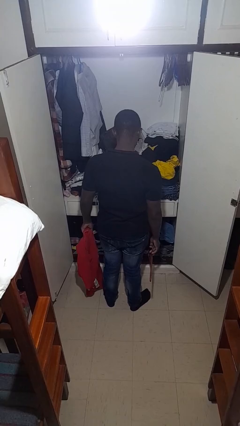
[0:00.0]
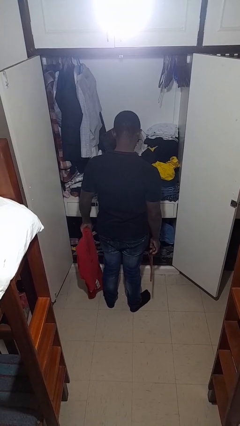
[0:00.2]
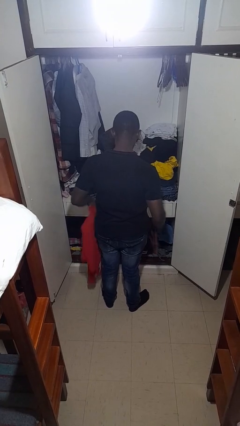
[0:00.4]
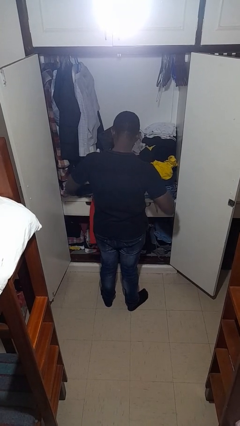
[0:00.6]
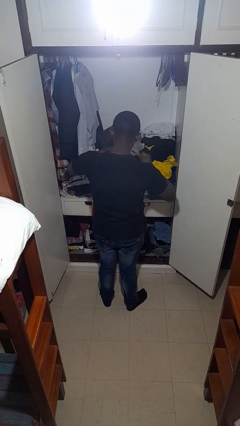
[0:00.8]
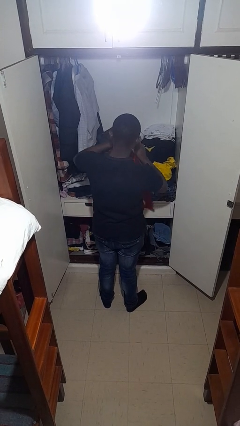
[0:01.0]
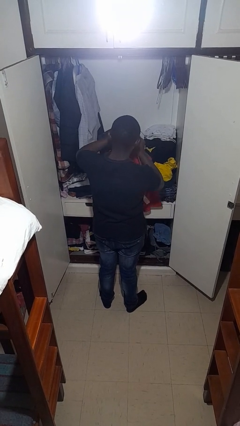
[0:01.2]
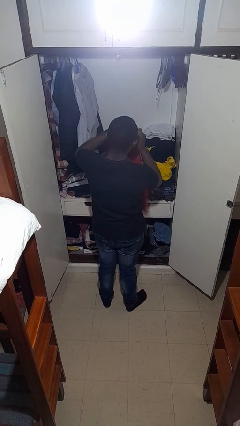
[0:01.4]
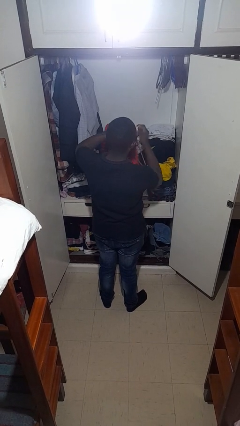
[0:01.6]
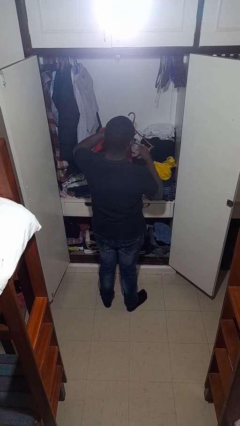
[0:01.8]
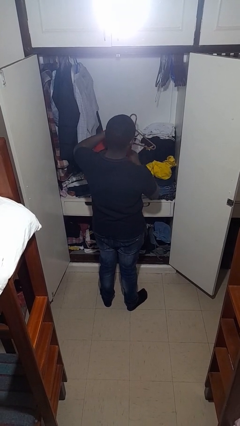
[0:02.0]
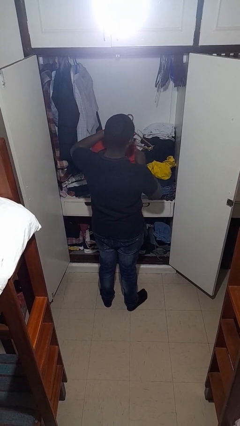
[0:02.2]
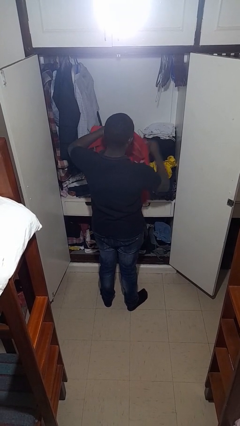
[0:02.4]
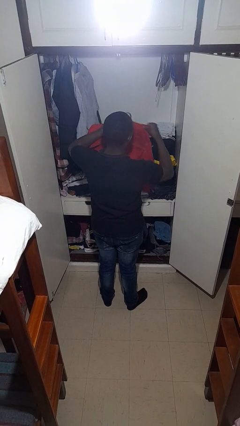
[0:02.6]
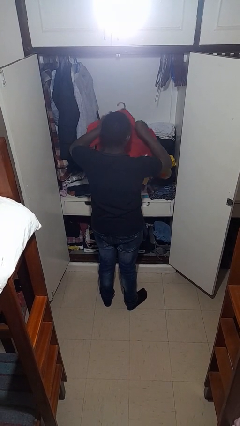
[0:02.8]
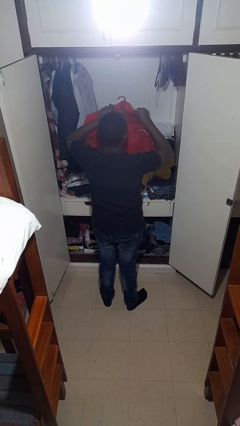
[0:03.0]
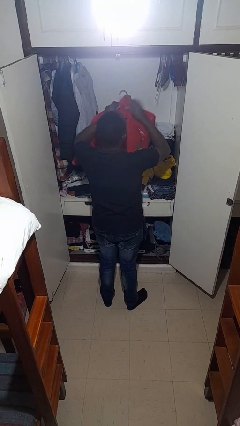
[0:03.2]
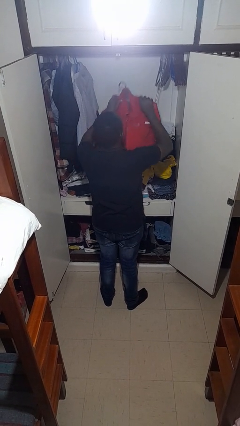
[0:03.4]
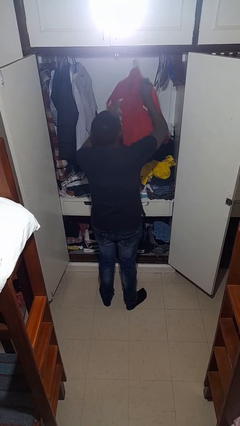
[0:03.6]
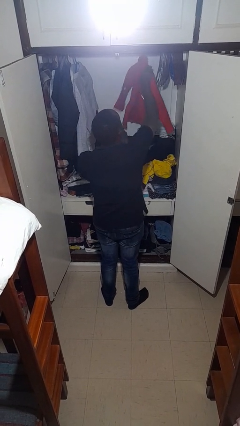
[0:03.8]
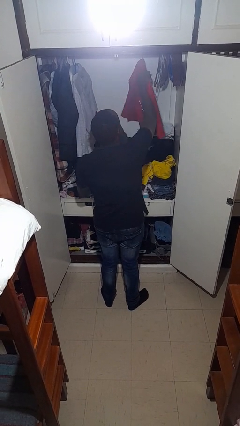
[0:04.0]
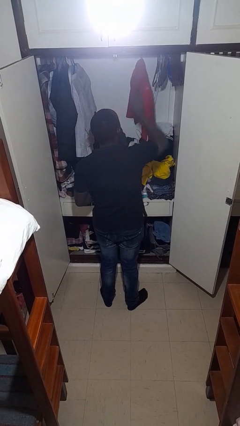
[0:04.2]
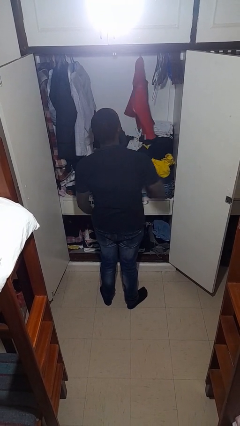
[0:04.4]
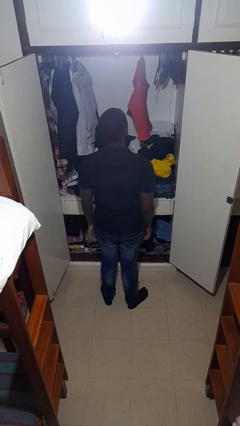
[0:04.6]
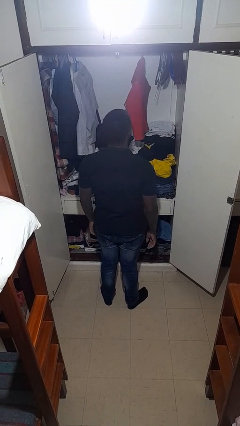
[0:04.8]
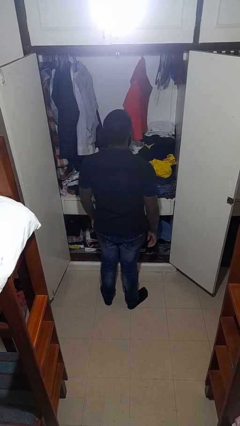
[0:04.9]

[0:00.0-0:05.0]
person puts clothes into closet

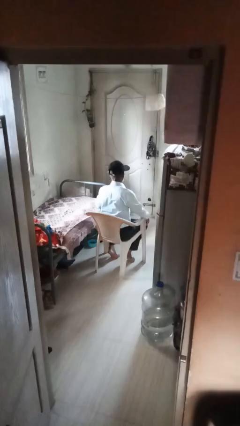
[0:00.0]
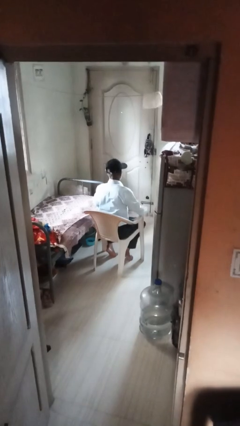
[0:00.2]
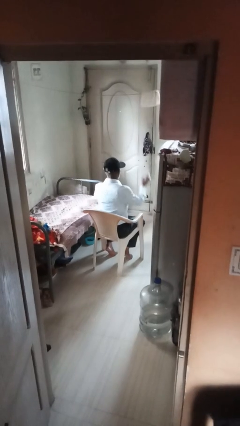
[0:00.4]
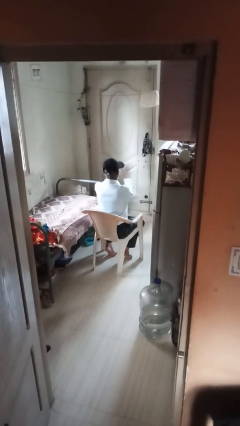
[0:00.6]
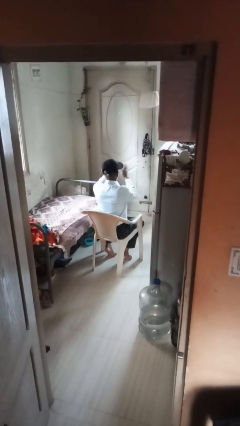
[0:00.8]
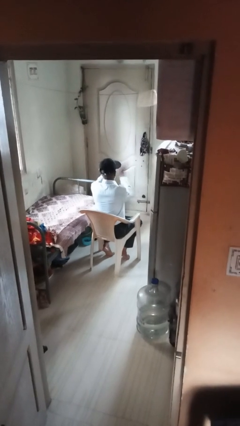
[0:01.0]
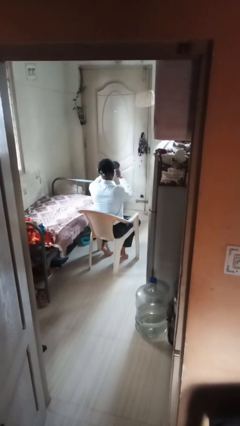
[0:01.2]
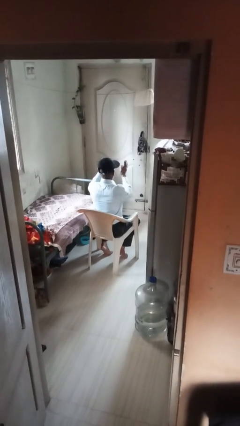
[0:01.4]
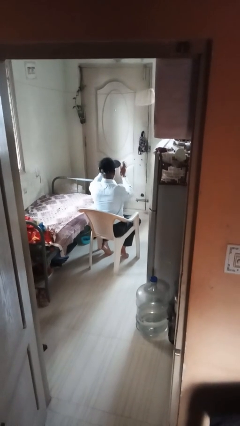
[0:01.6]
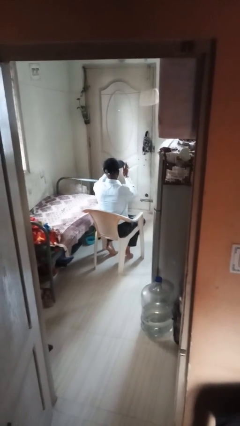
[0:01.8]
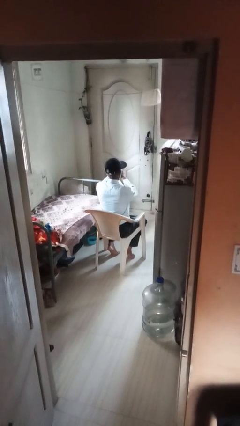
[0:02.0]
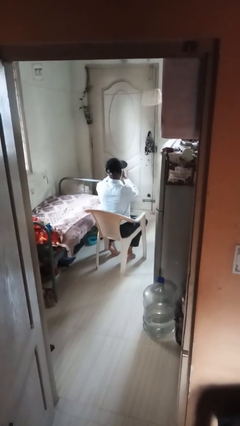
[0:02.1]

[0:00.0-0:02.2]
person claps hands

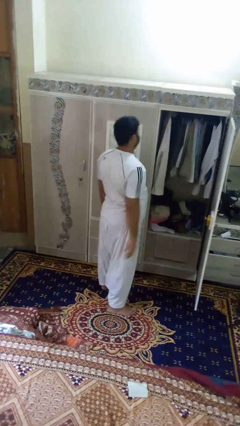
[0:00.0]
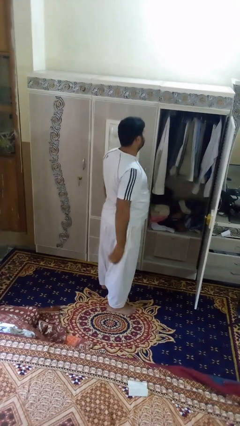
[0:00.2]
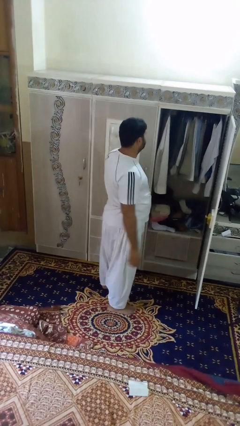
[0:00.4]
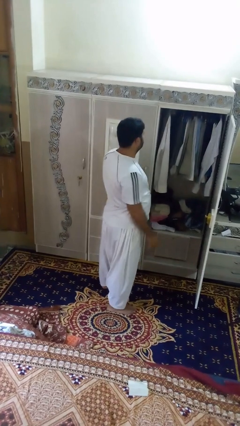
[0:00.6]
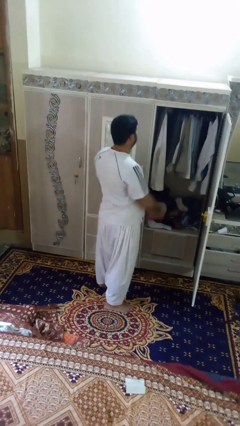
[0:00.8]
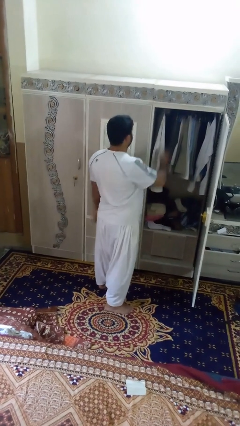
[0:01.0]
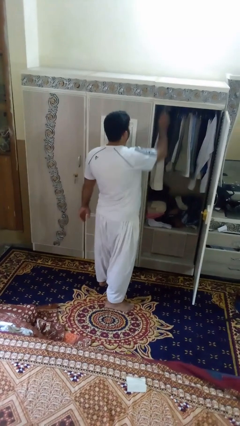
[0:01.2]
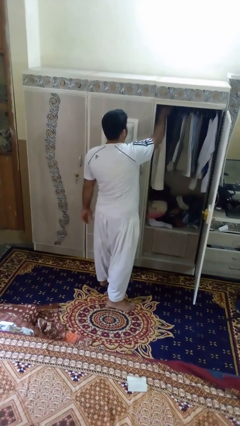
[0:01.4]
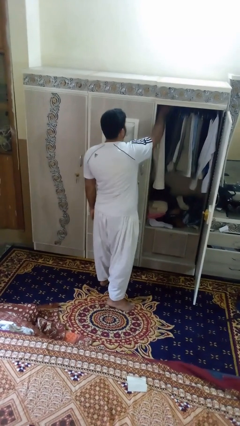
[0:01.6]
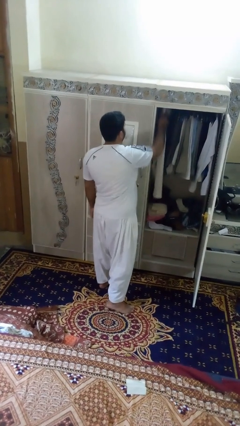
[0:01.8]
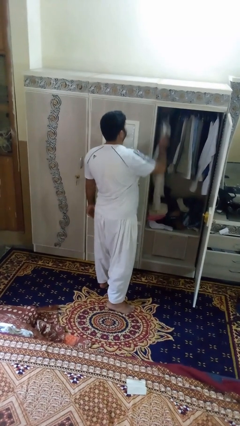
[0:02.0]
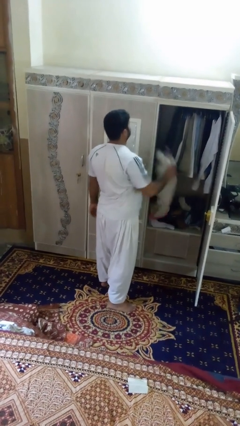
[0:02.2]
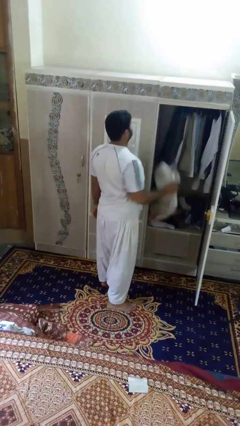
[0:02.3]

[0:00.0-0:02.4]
person takes clothes from closet

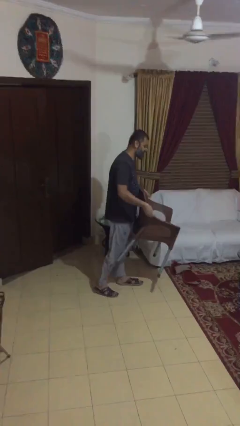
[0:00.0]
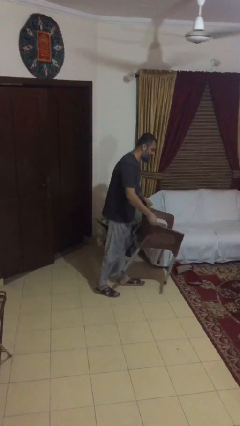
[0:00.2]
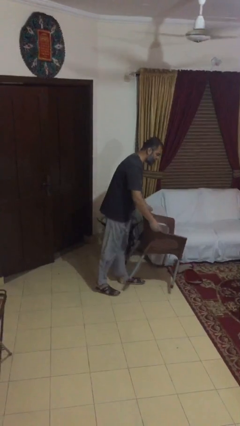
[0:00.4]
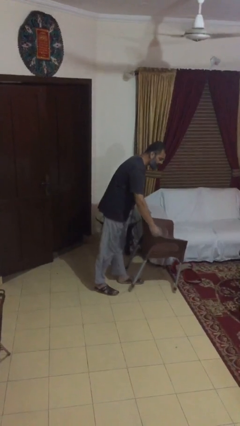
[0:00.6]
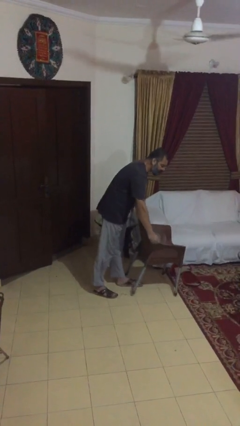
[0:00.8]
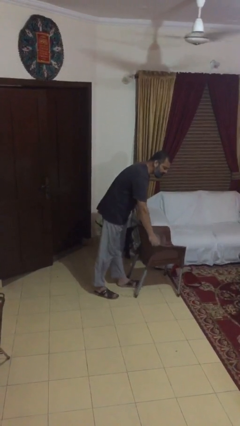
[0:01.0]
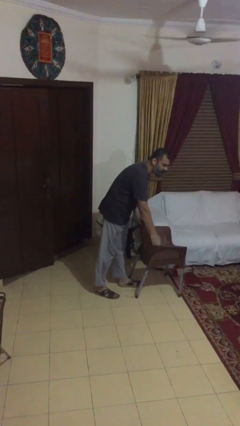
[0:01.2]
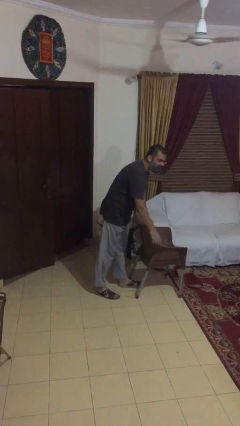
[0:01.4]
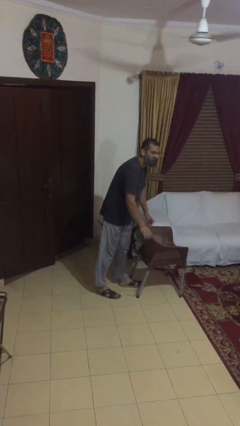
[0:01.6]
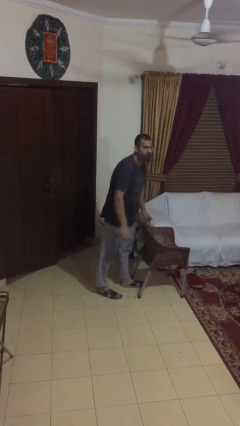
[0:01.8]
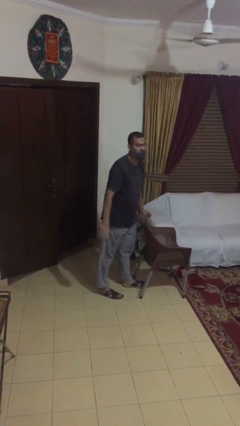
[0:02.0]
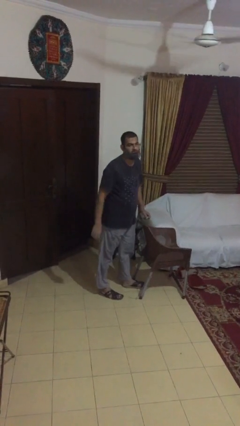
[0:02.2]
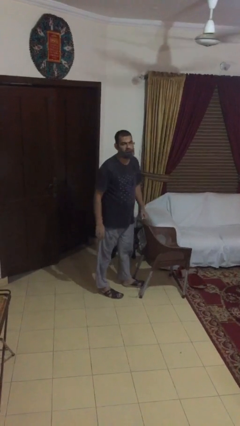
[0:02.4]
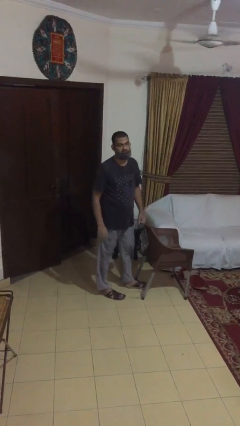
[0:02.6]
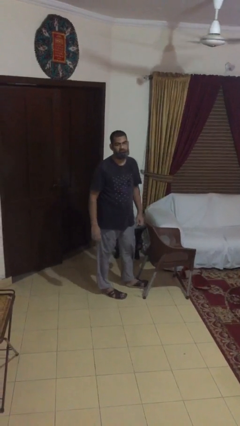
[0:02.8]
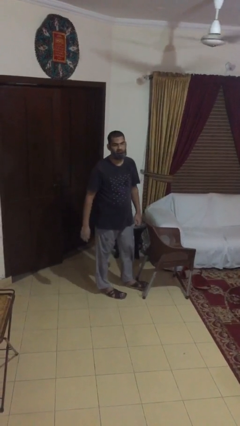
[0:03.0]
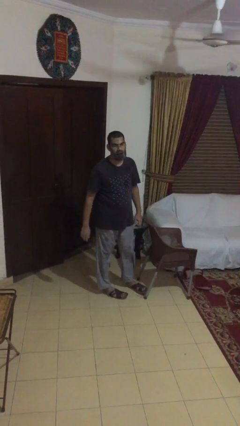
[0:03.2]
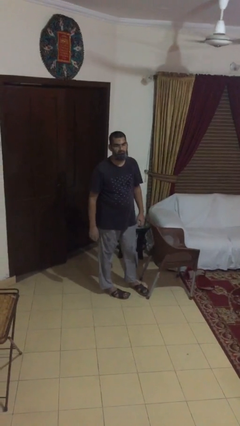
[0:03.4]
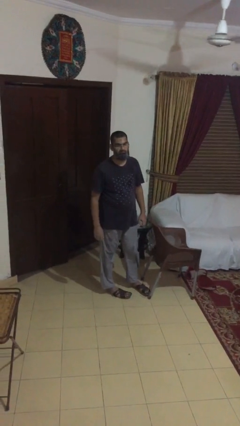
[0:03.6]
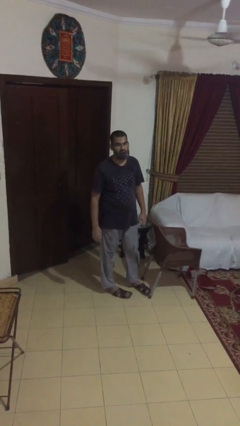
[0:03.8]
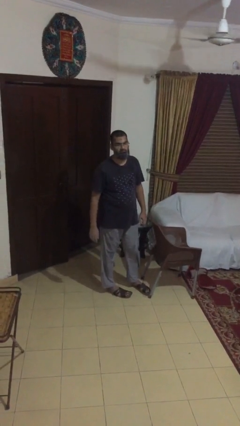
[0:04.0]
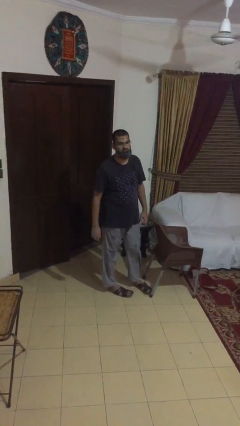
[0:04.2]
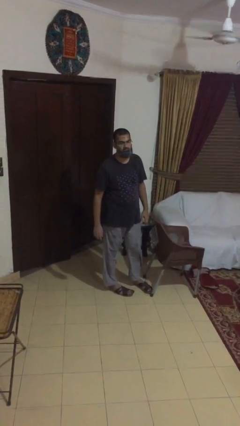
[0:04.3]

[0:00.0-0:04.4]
person puts down object on floor

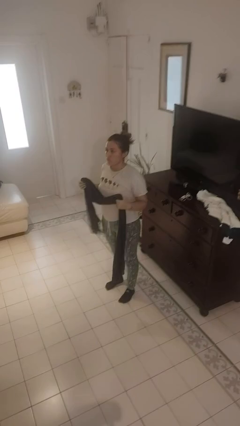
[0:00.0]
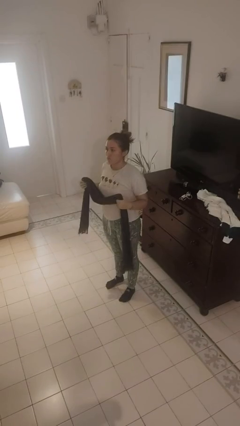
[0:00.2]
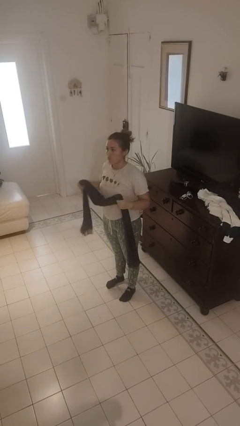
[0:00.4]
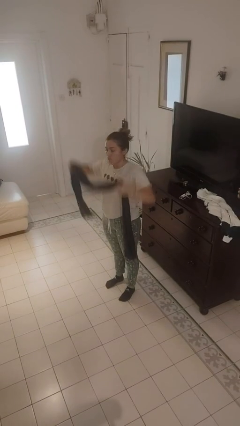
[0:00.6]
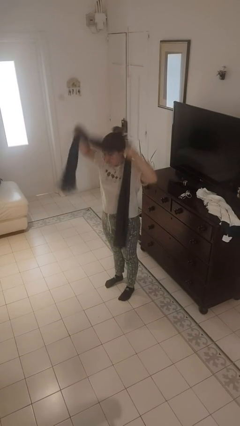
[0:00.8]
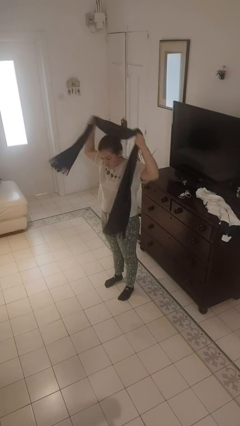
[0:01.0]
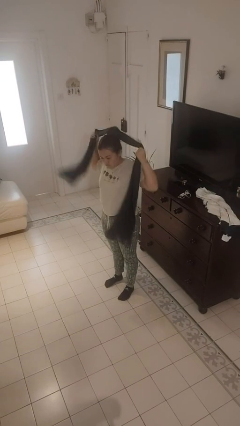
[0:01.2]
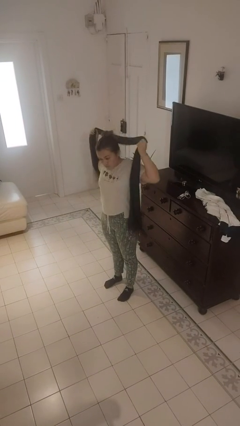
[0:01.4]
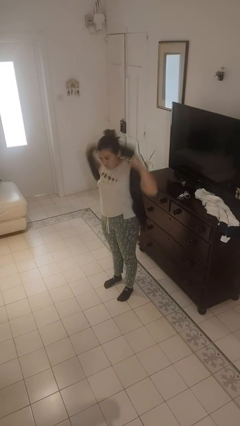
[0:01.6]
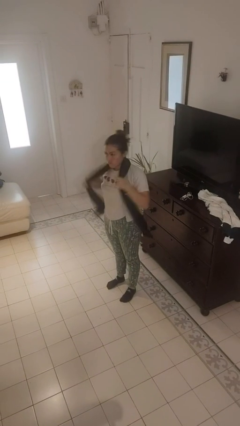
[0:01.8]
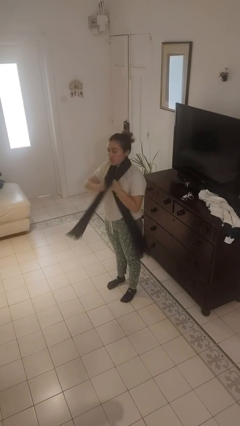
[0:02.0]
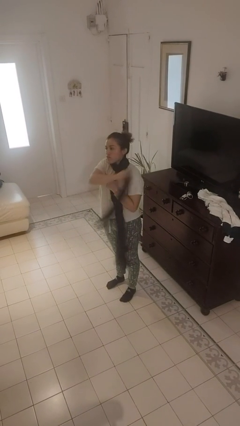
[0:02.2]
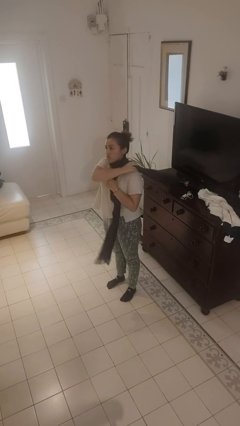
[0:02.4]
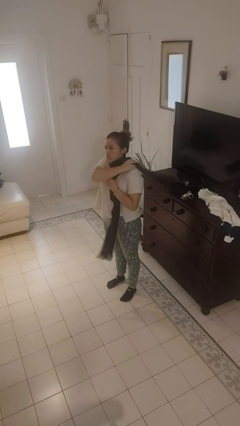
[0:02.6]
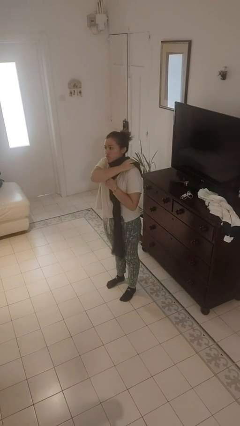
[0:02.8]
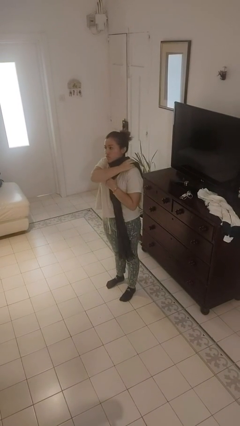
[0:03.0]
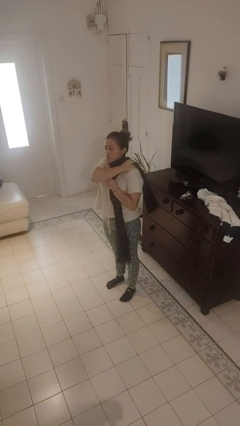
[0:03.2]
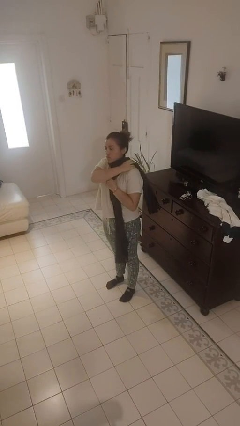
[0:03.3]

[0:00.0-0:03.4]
person puts on scarf

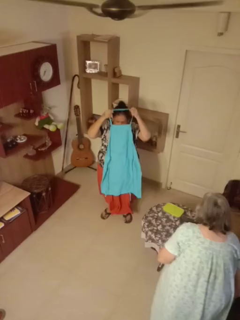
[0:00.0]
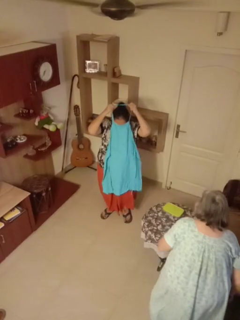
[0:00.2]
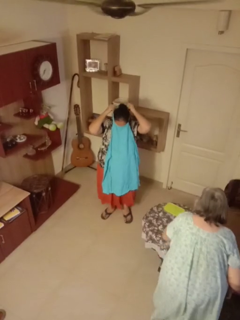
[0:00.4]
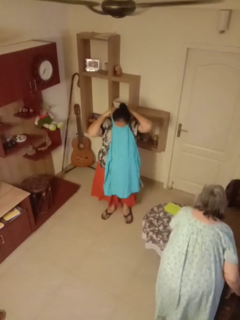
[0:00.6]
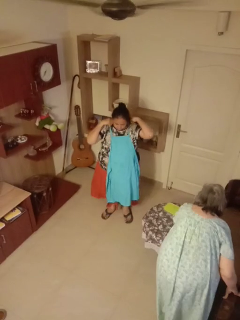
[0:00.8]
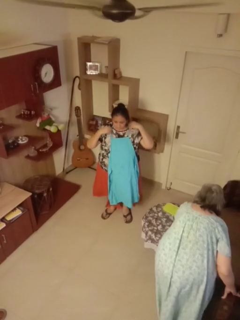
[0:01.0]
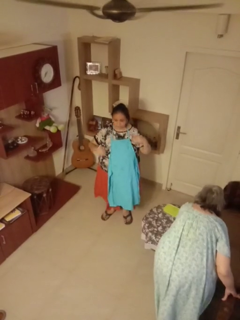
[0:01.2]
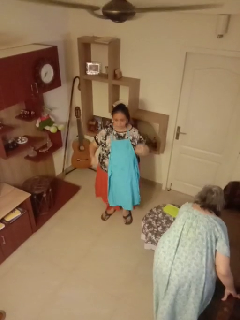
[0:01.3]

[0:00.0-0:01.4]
person puts on apron
